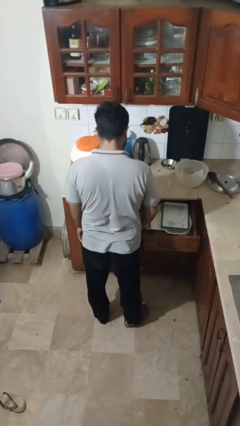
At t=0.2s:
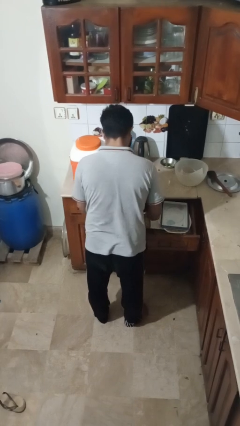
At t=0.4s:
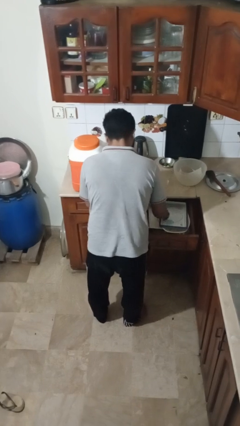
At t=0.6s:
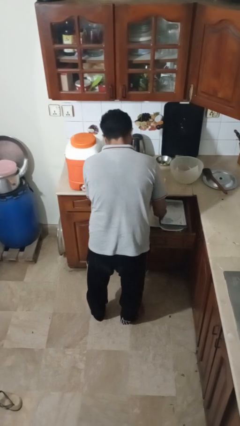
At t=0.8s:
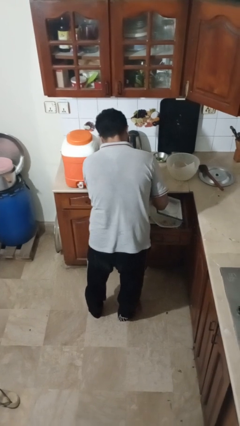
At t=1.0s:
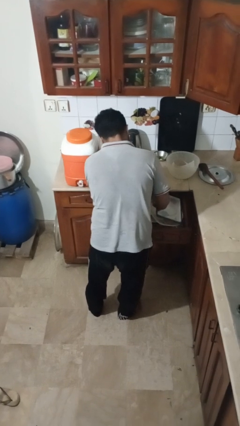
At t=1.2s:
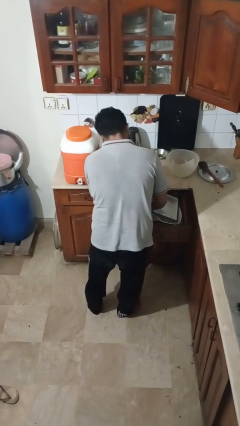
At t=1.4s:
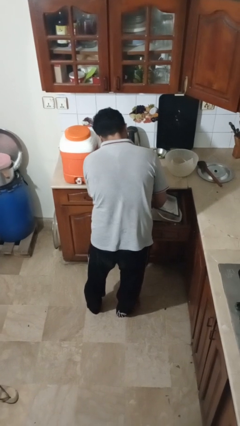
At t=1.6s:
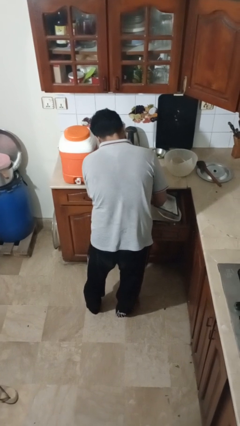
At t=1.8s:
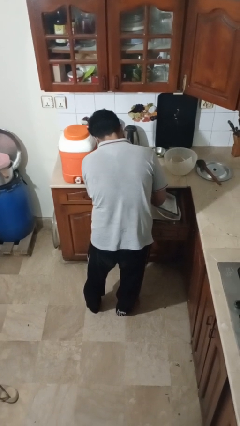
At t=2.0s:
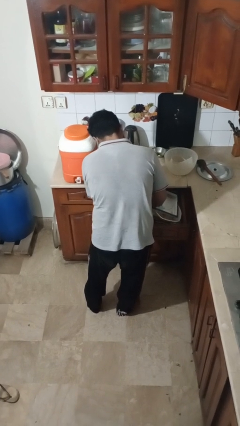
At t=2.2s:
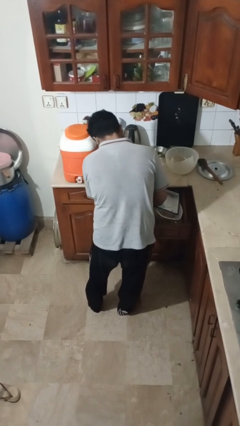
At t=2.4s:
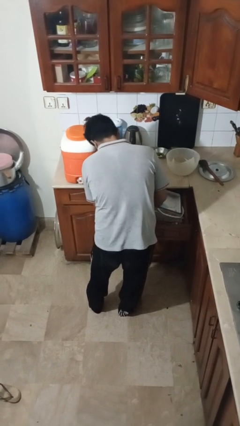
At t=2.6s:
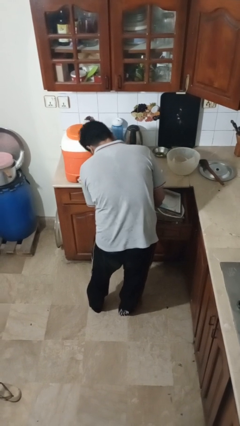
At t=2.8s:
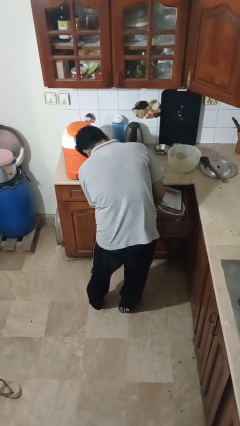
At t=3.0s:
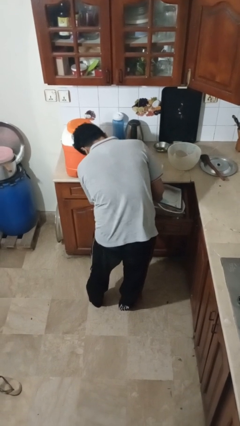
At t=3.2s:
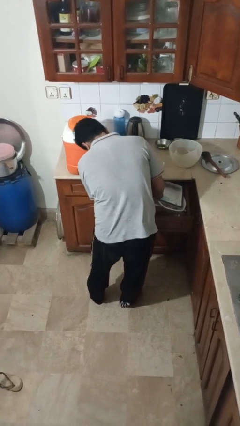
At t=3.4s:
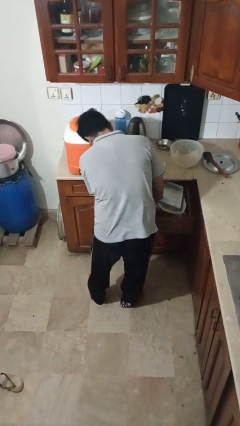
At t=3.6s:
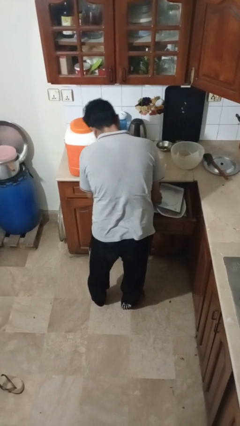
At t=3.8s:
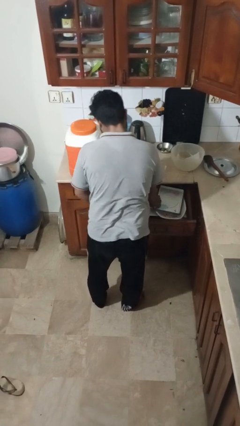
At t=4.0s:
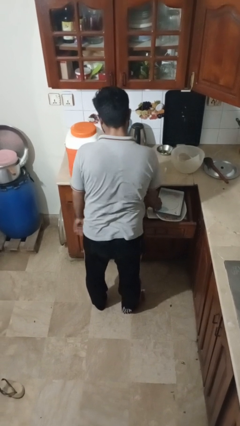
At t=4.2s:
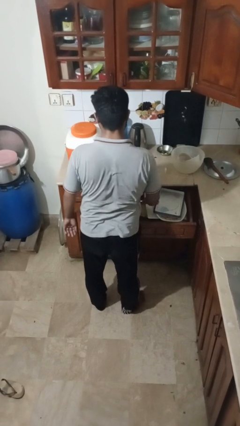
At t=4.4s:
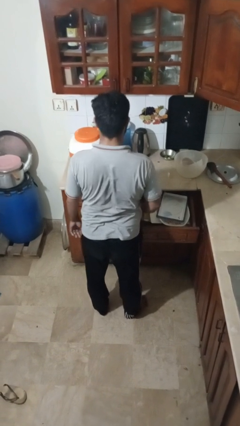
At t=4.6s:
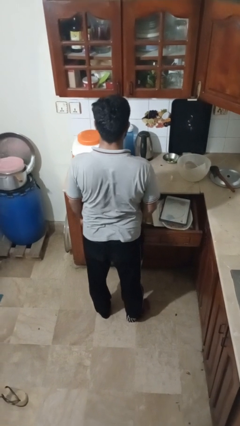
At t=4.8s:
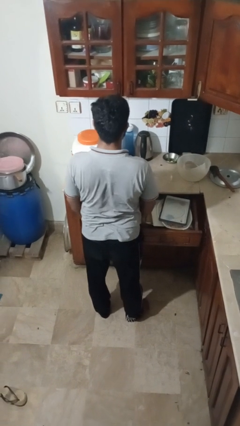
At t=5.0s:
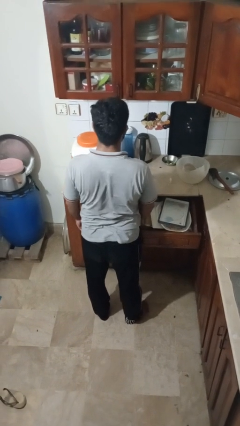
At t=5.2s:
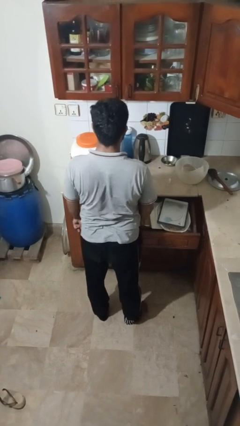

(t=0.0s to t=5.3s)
person searches in kitchen drawer

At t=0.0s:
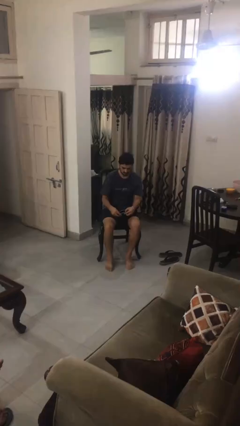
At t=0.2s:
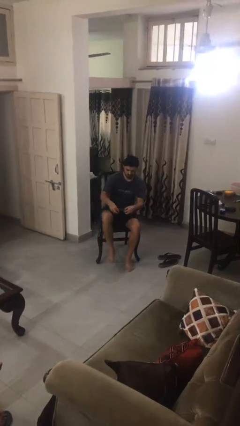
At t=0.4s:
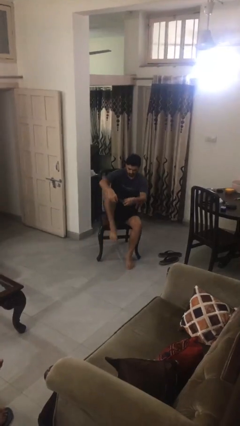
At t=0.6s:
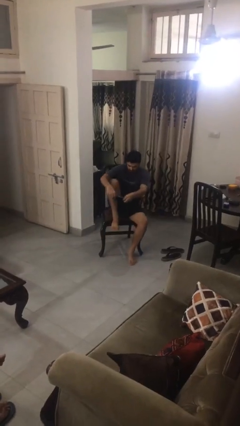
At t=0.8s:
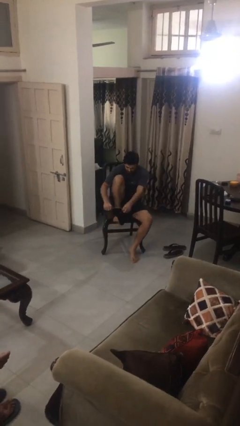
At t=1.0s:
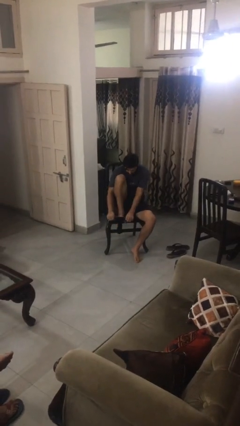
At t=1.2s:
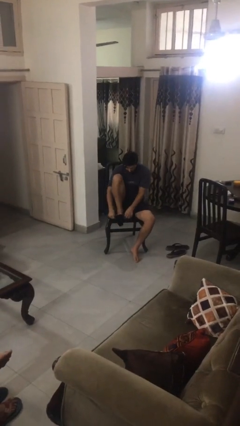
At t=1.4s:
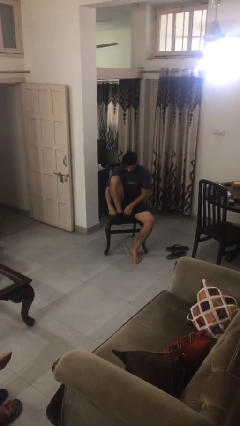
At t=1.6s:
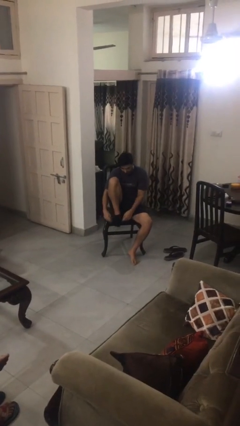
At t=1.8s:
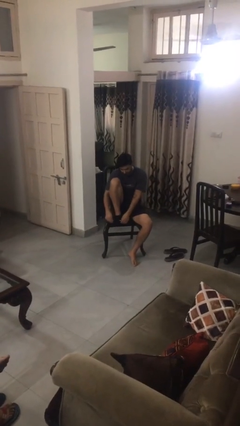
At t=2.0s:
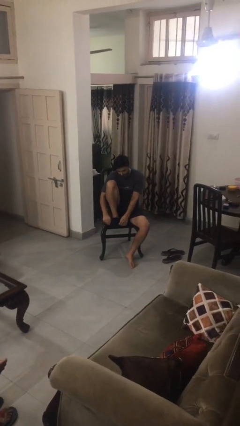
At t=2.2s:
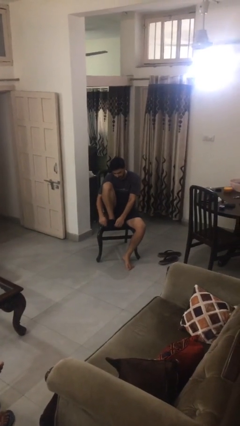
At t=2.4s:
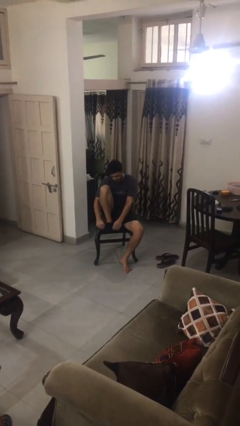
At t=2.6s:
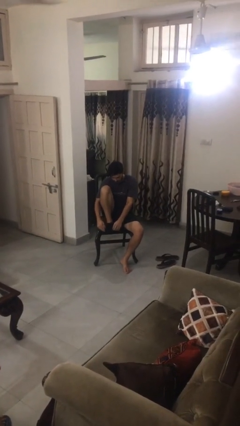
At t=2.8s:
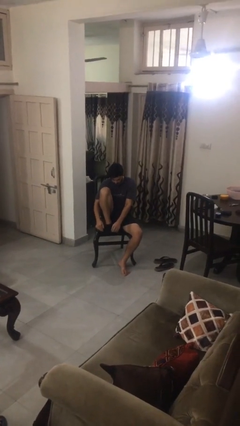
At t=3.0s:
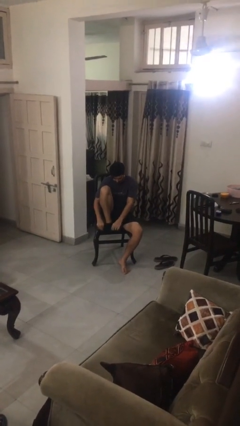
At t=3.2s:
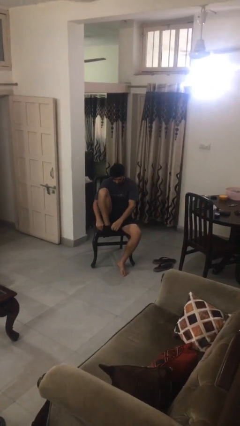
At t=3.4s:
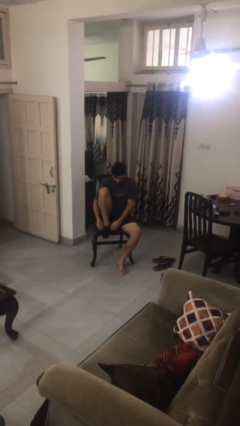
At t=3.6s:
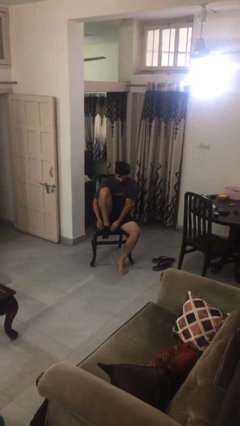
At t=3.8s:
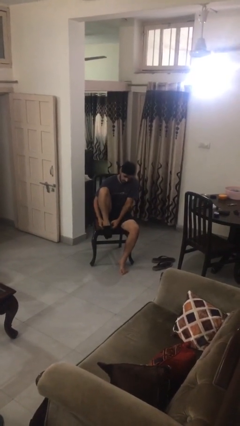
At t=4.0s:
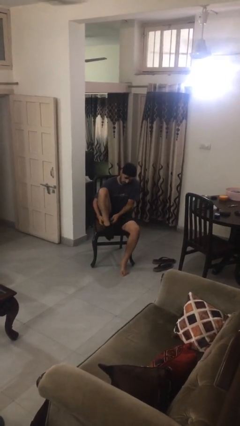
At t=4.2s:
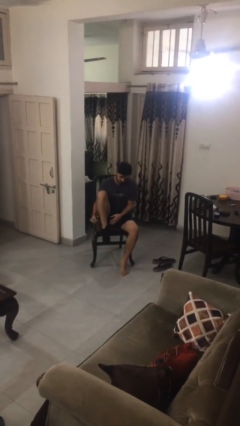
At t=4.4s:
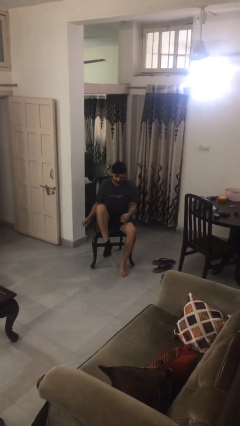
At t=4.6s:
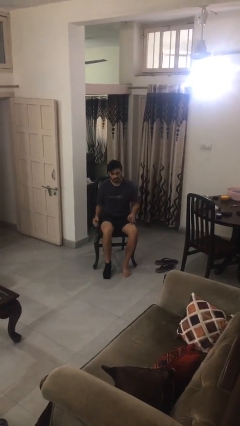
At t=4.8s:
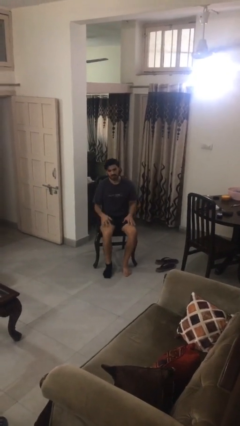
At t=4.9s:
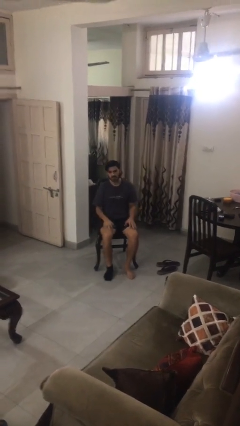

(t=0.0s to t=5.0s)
person puts on socks

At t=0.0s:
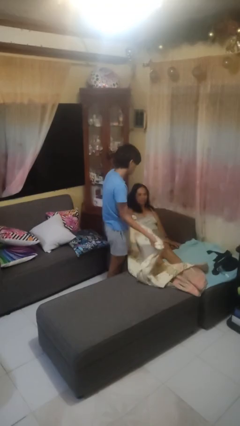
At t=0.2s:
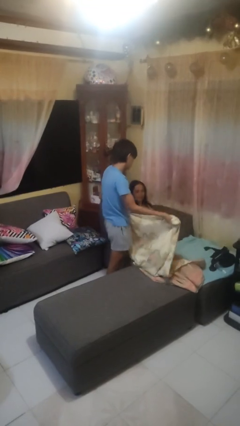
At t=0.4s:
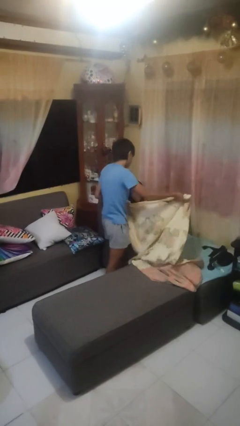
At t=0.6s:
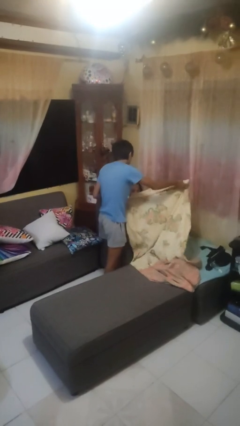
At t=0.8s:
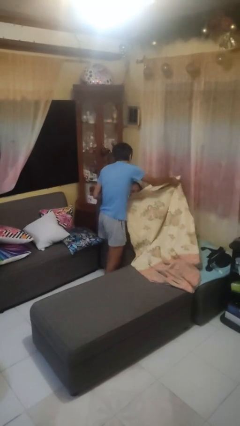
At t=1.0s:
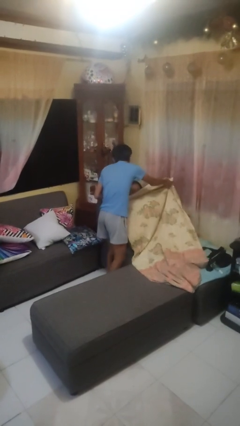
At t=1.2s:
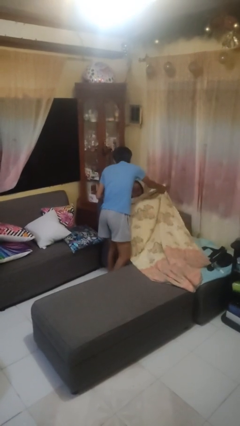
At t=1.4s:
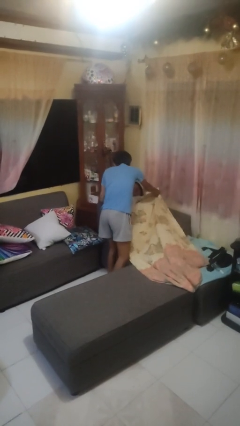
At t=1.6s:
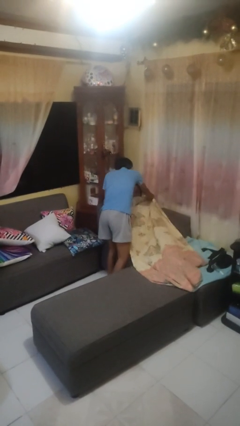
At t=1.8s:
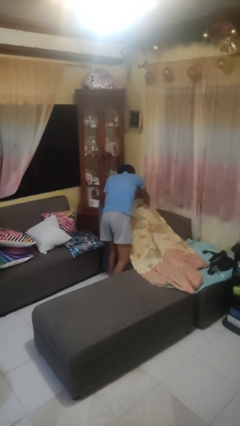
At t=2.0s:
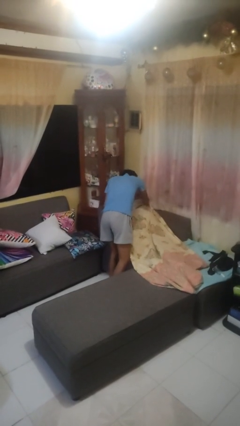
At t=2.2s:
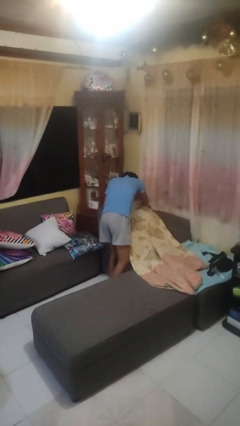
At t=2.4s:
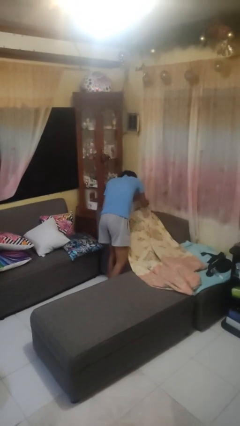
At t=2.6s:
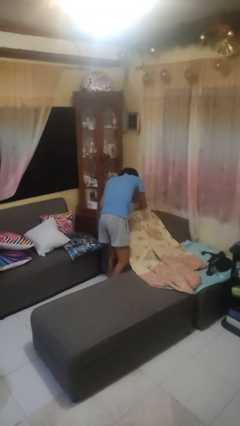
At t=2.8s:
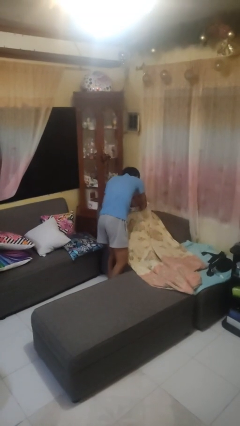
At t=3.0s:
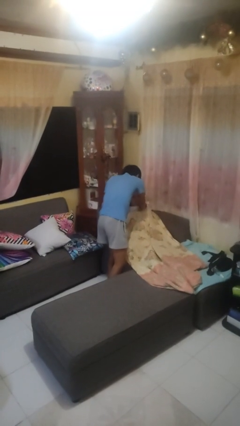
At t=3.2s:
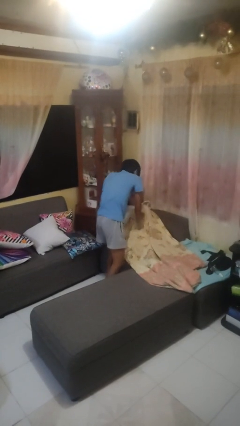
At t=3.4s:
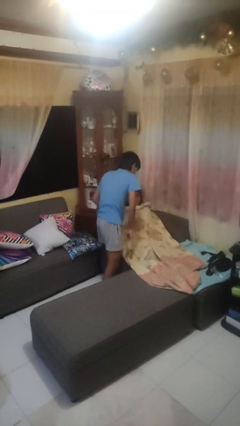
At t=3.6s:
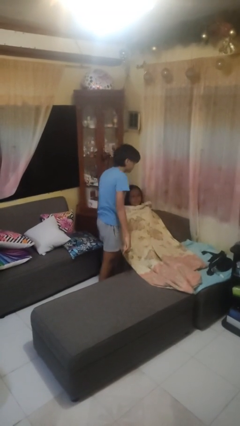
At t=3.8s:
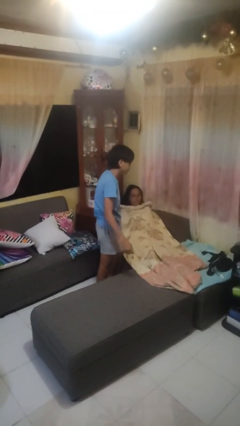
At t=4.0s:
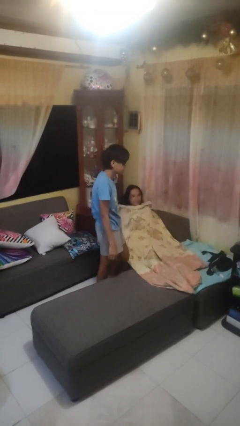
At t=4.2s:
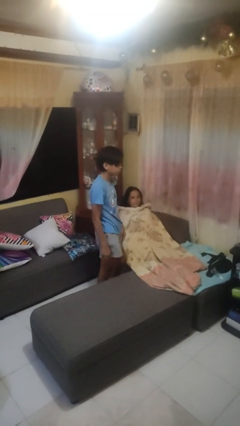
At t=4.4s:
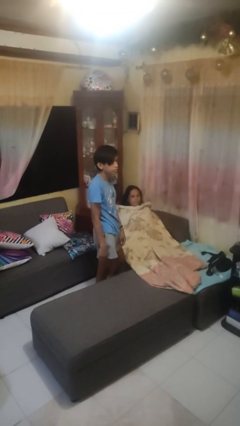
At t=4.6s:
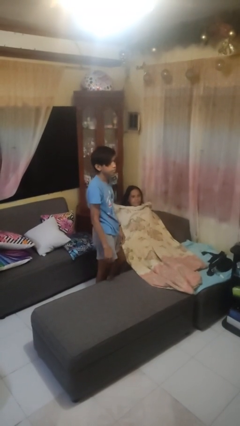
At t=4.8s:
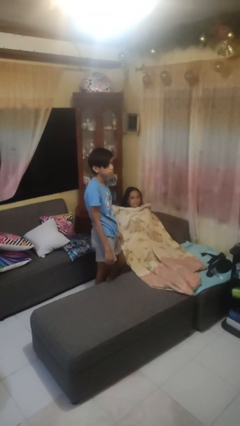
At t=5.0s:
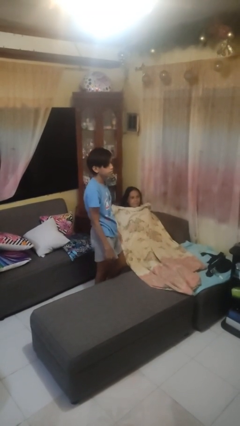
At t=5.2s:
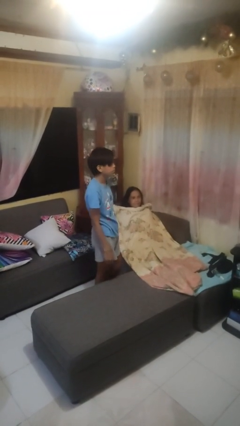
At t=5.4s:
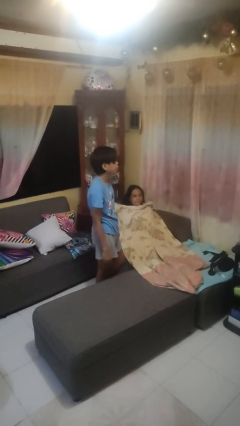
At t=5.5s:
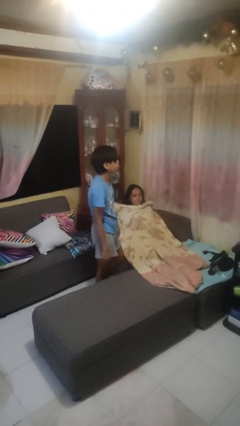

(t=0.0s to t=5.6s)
person covers friend with blanket

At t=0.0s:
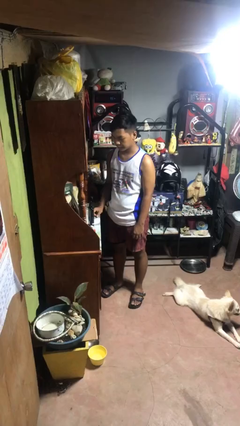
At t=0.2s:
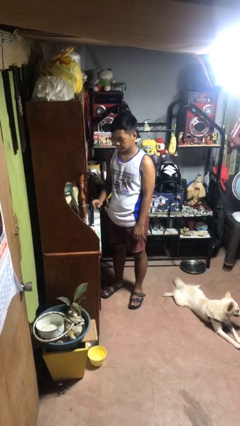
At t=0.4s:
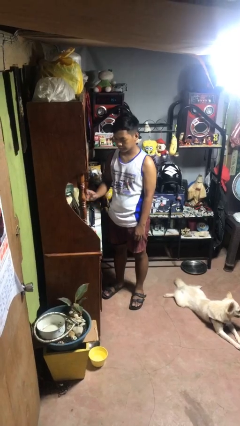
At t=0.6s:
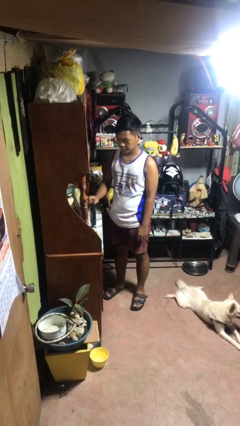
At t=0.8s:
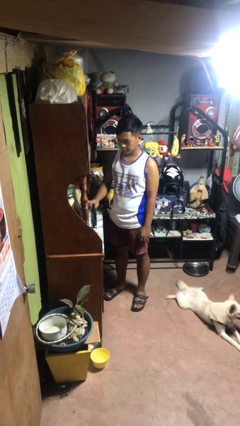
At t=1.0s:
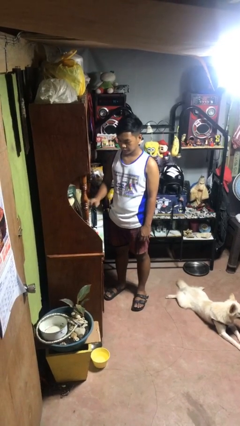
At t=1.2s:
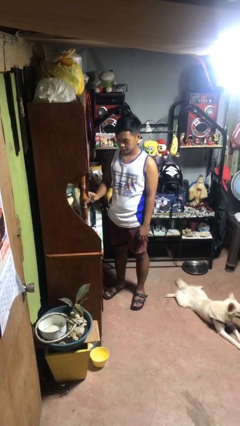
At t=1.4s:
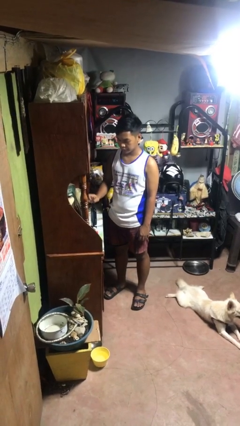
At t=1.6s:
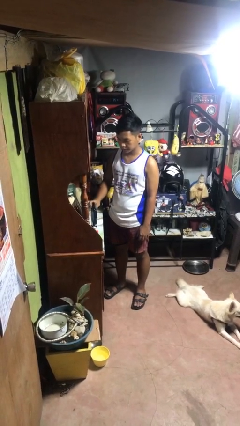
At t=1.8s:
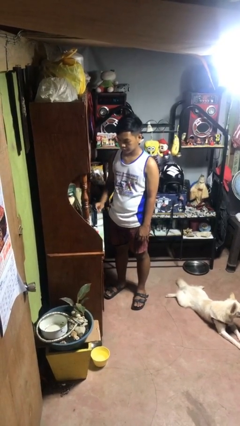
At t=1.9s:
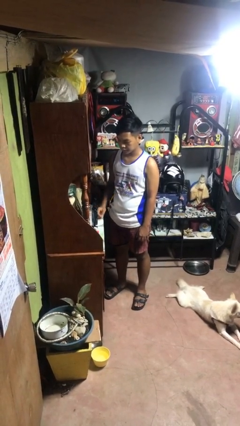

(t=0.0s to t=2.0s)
person taps object with finger
